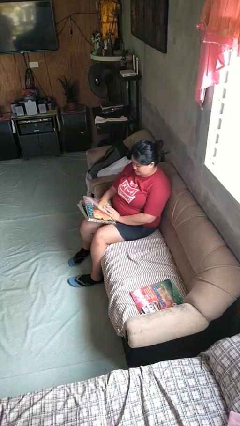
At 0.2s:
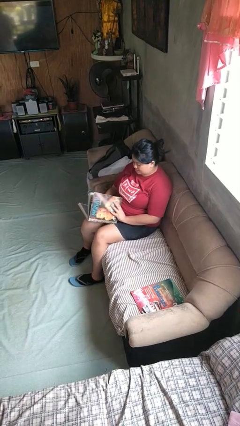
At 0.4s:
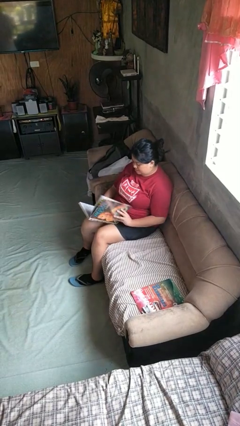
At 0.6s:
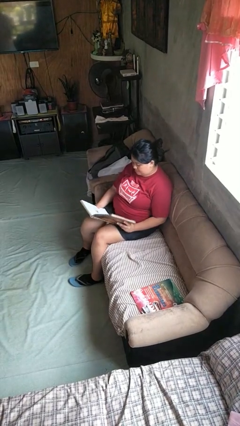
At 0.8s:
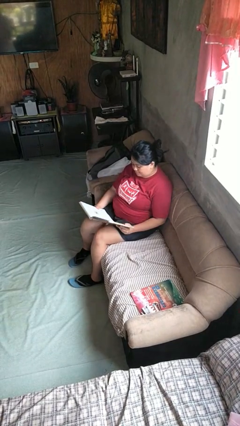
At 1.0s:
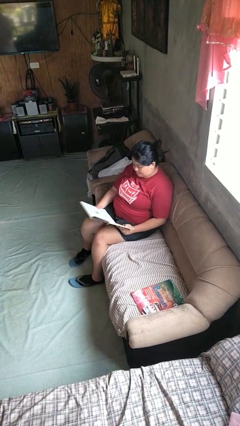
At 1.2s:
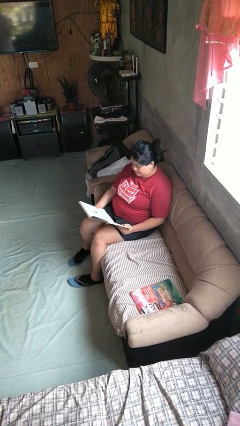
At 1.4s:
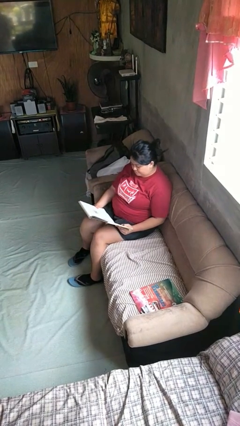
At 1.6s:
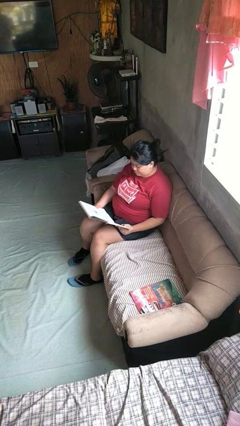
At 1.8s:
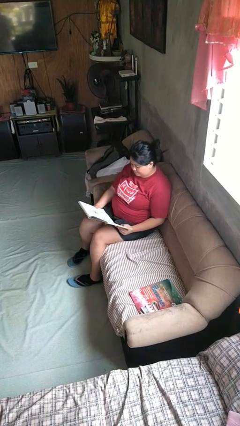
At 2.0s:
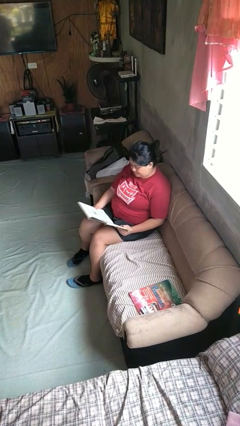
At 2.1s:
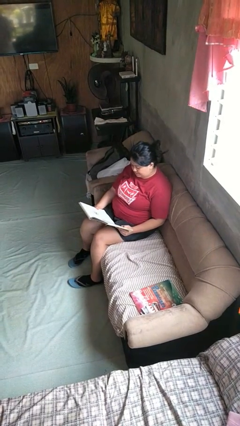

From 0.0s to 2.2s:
person reads book

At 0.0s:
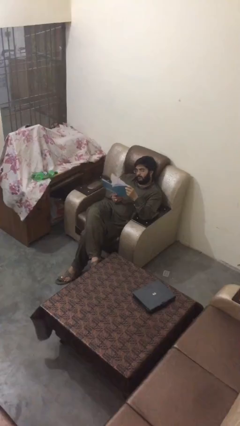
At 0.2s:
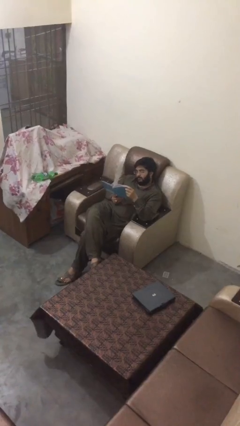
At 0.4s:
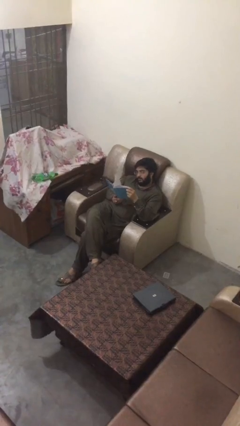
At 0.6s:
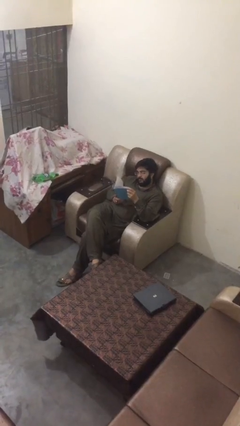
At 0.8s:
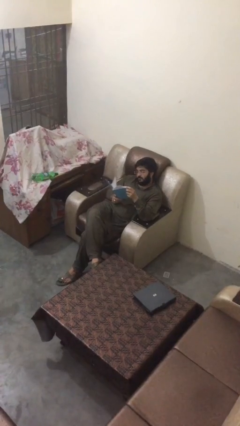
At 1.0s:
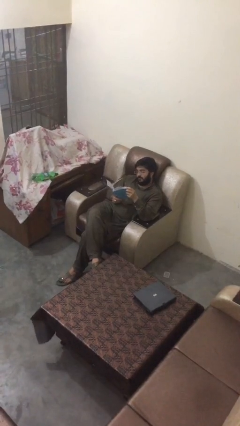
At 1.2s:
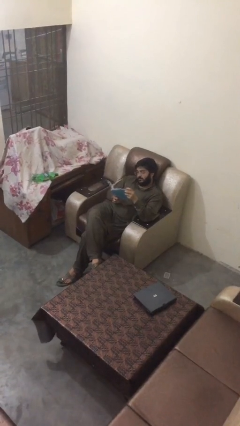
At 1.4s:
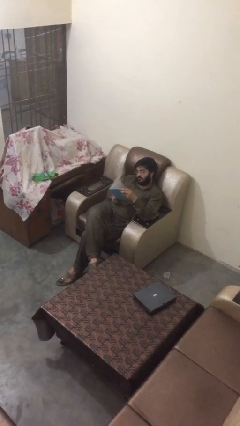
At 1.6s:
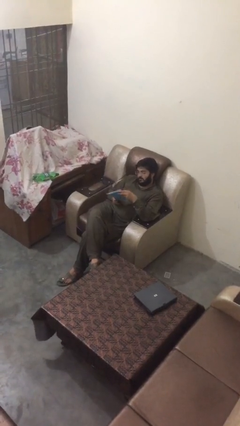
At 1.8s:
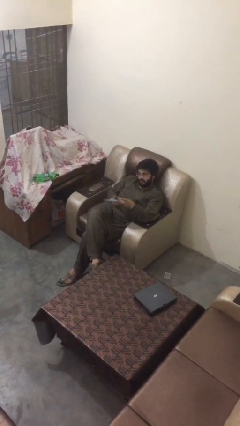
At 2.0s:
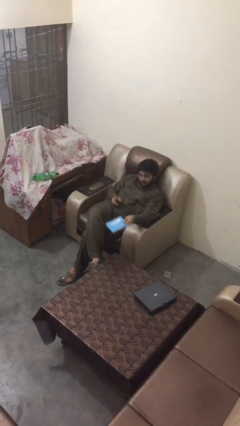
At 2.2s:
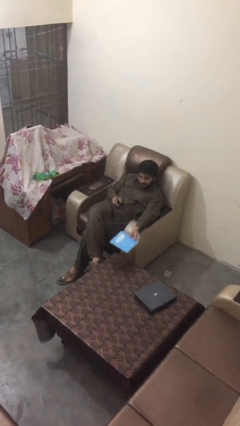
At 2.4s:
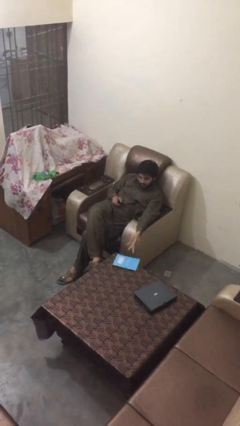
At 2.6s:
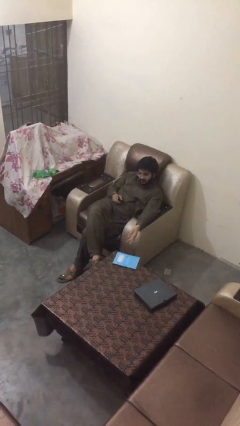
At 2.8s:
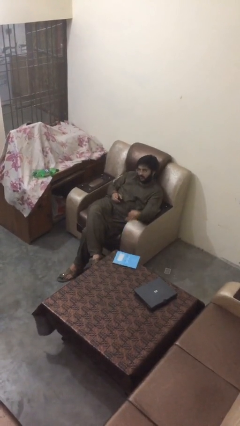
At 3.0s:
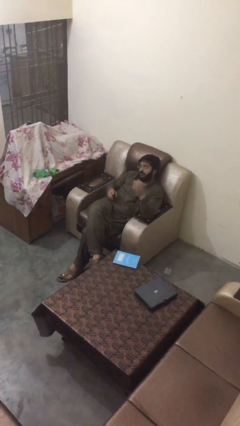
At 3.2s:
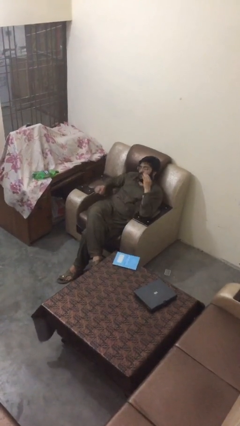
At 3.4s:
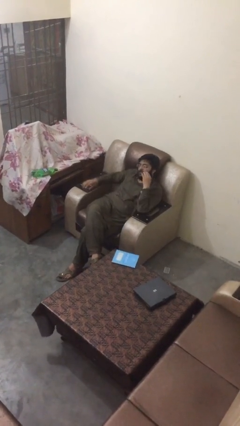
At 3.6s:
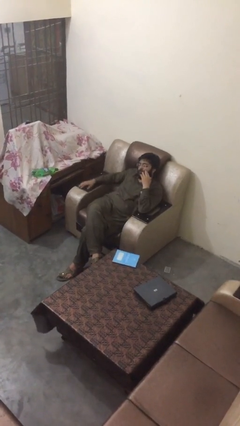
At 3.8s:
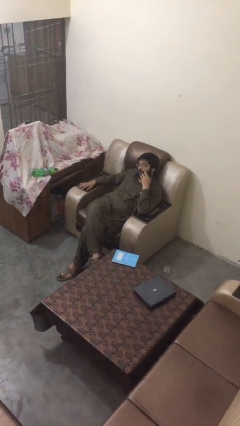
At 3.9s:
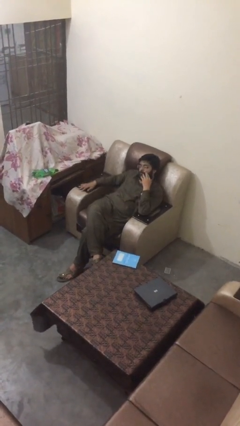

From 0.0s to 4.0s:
person puts down object on table

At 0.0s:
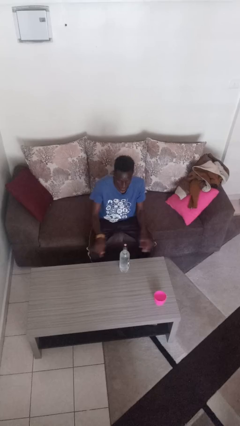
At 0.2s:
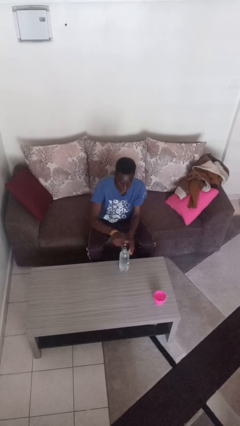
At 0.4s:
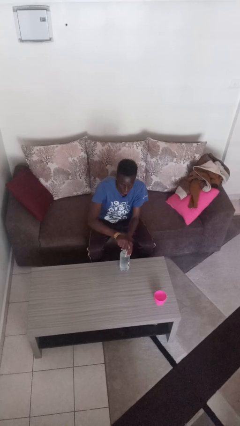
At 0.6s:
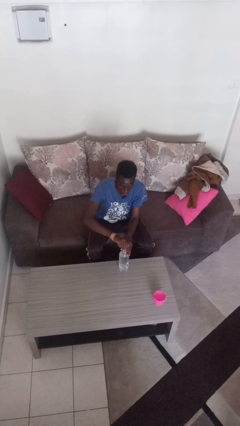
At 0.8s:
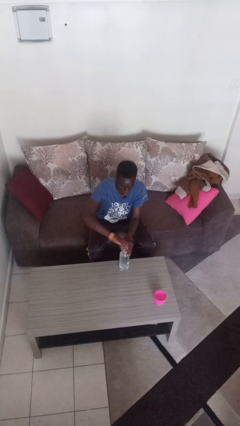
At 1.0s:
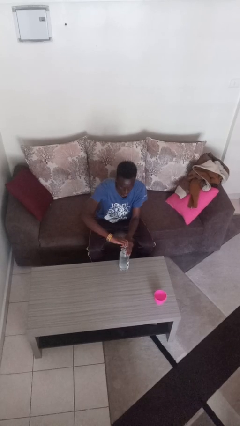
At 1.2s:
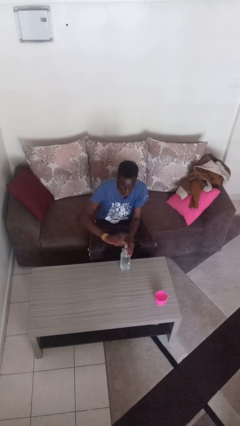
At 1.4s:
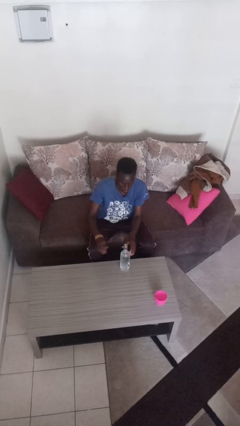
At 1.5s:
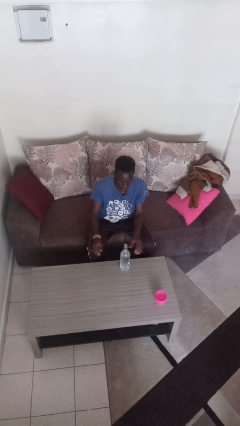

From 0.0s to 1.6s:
person unscrews lid from bottle

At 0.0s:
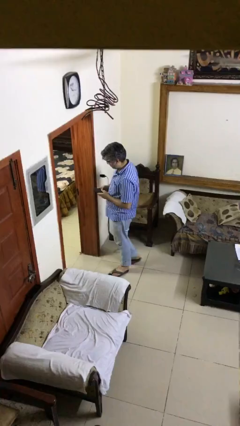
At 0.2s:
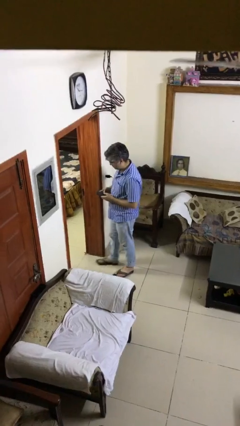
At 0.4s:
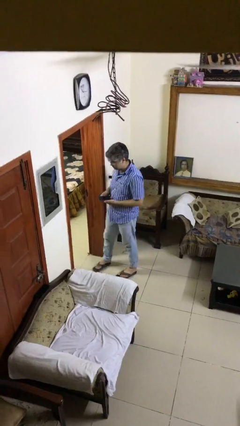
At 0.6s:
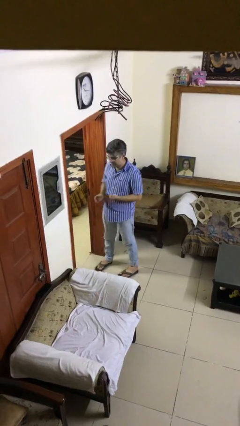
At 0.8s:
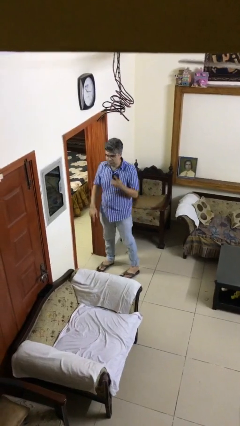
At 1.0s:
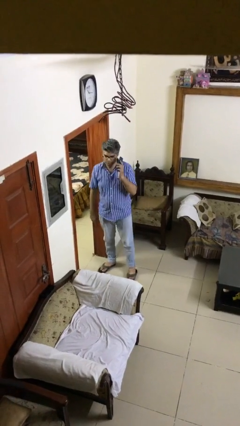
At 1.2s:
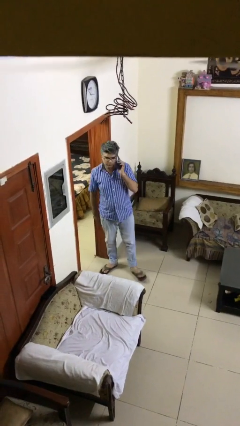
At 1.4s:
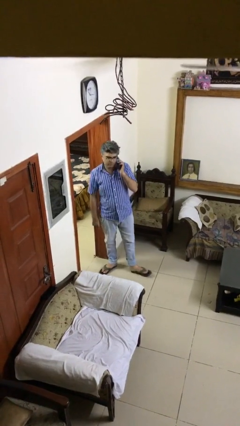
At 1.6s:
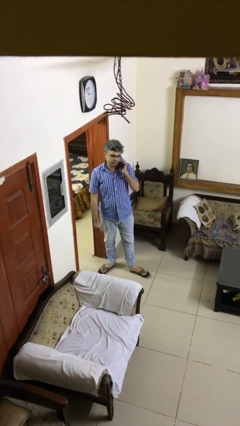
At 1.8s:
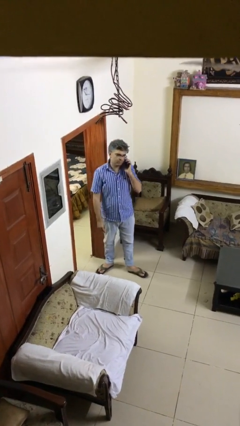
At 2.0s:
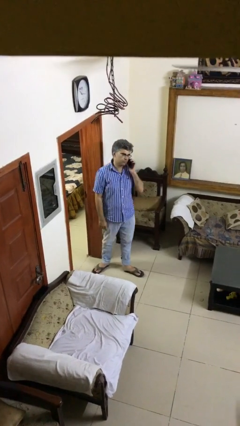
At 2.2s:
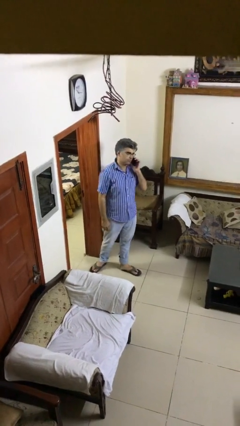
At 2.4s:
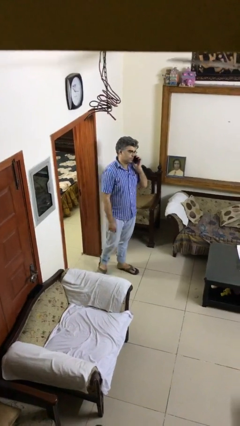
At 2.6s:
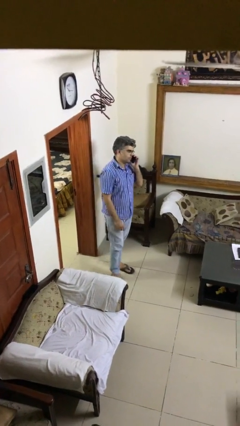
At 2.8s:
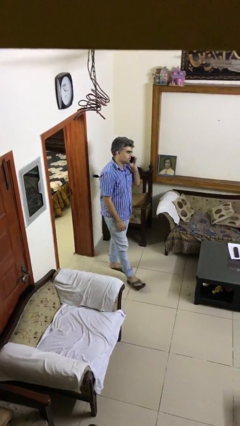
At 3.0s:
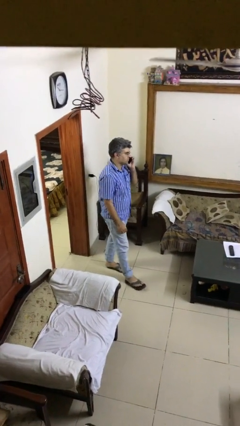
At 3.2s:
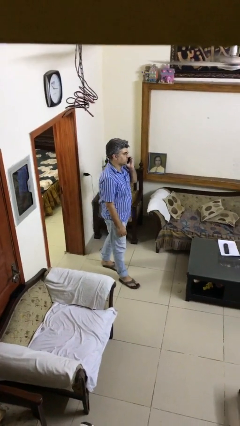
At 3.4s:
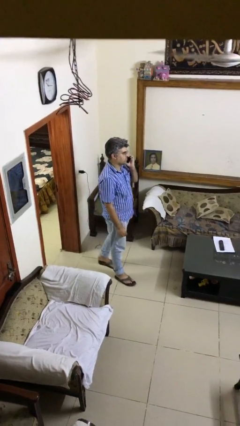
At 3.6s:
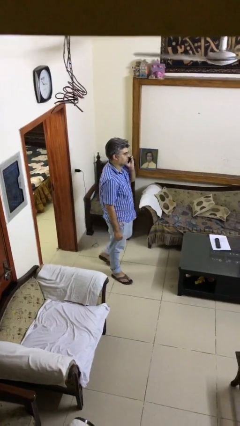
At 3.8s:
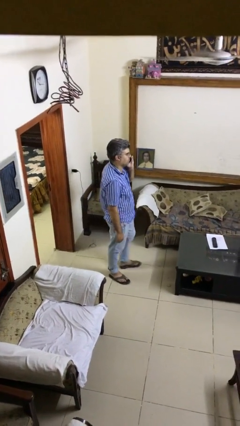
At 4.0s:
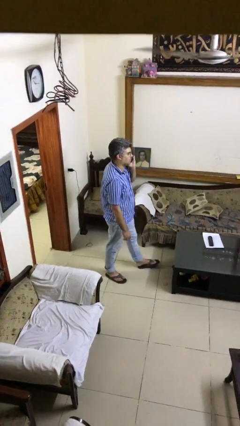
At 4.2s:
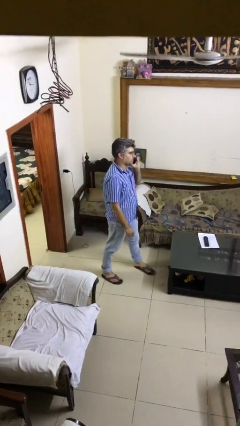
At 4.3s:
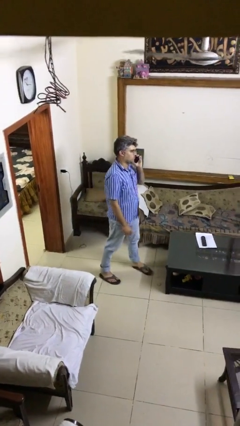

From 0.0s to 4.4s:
person talks on phone

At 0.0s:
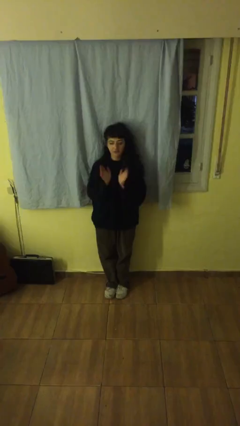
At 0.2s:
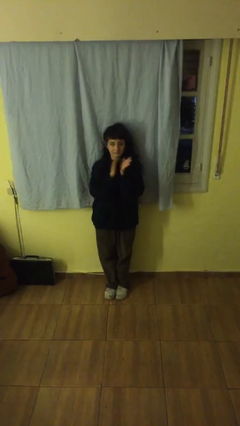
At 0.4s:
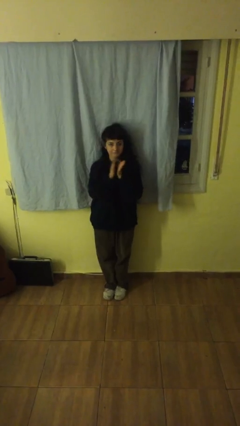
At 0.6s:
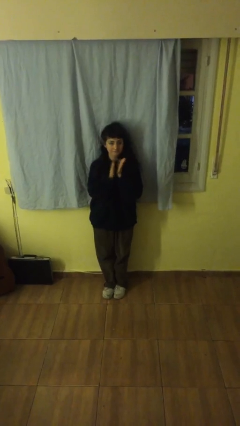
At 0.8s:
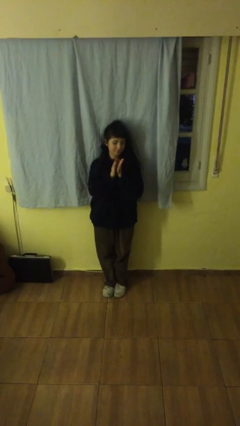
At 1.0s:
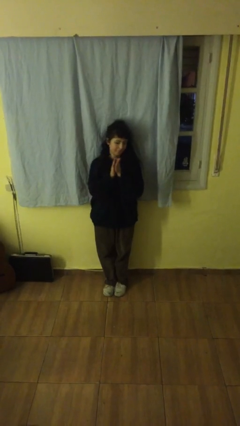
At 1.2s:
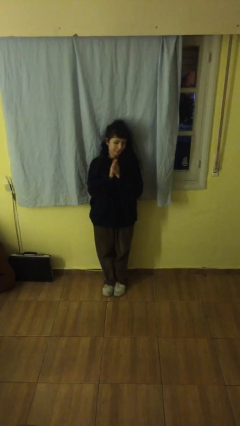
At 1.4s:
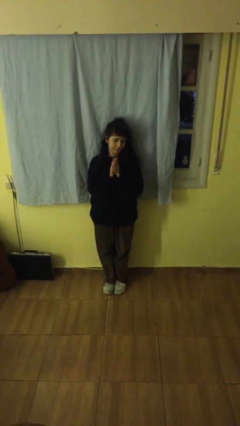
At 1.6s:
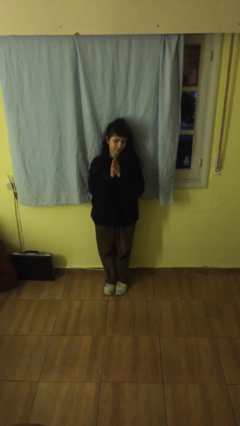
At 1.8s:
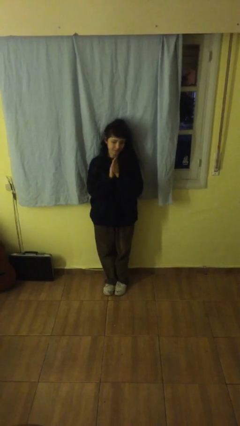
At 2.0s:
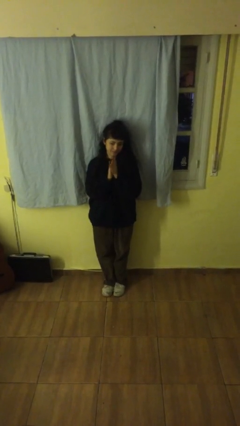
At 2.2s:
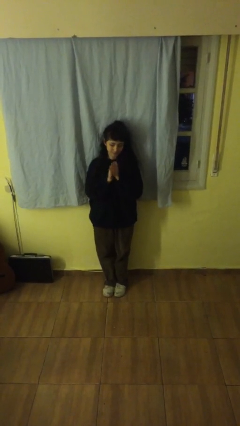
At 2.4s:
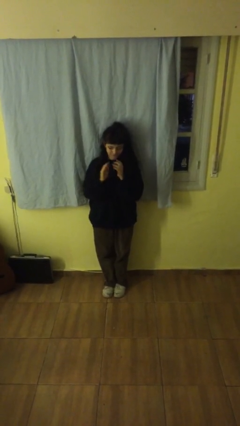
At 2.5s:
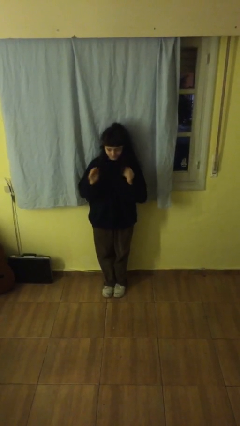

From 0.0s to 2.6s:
person claps hands

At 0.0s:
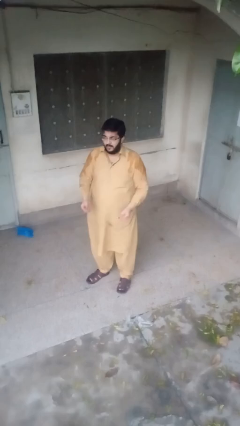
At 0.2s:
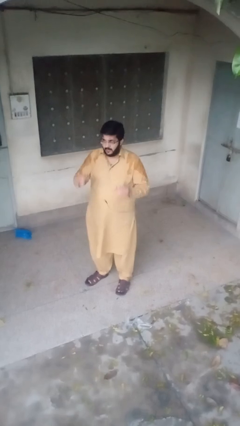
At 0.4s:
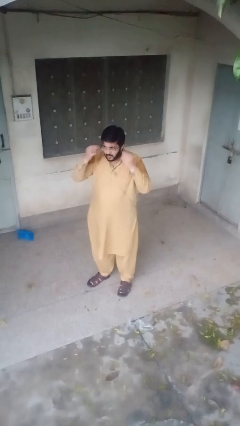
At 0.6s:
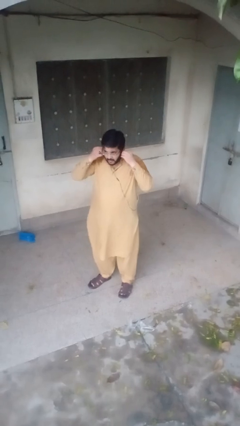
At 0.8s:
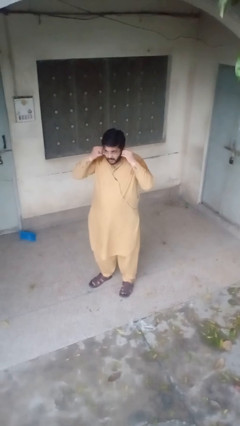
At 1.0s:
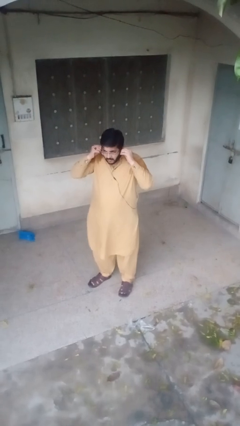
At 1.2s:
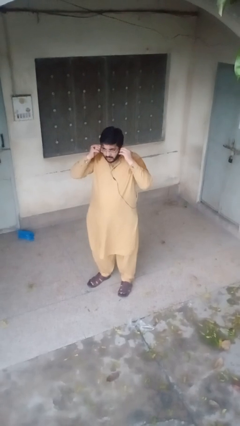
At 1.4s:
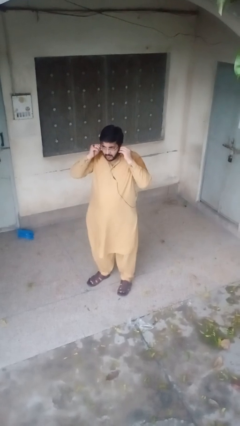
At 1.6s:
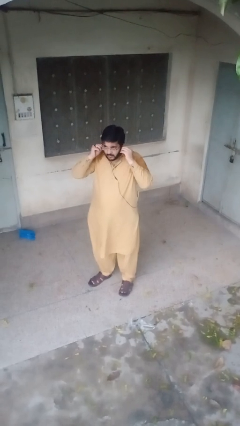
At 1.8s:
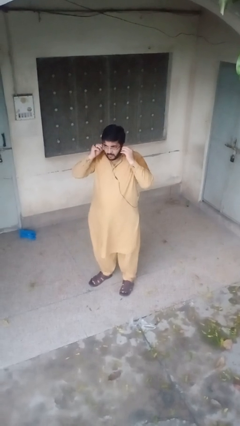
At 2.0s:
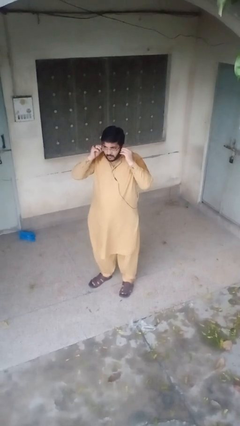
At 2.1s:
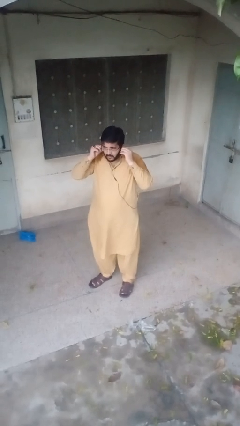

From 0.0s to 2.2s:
person puts on headphones
